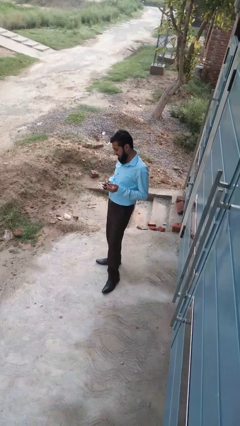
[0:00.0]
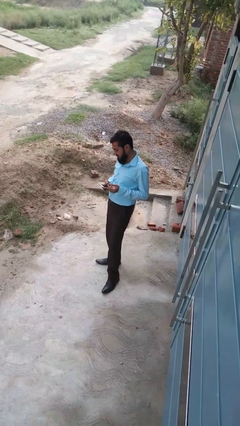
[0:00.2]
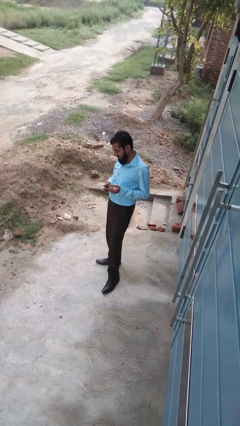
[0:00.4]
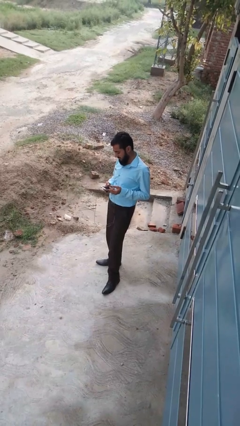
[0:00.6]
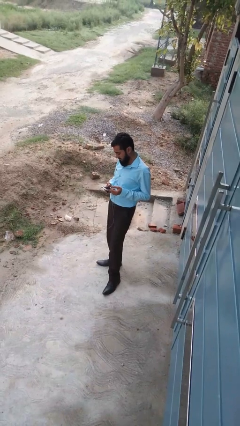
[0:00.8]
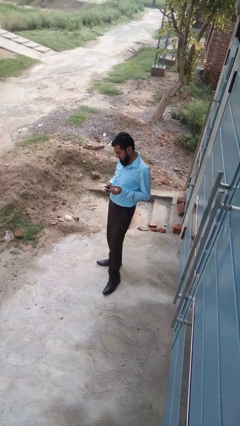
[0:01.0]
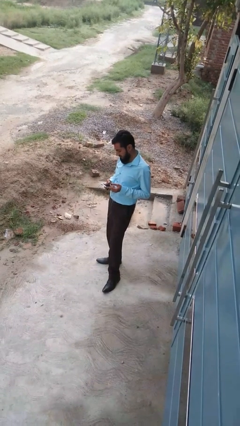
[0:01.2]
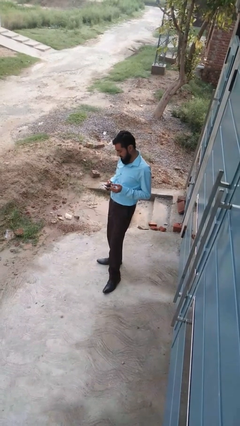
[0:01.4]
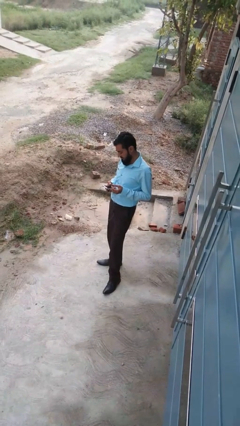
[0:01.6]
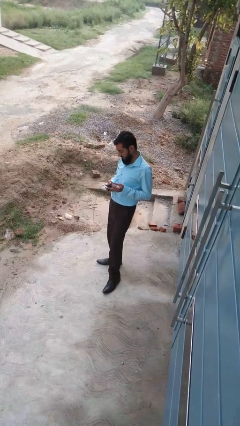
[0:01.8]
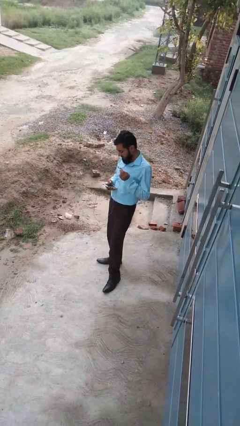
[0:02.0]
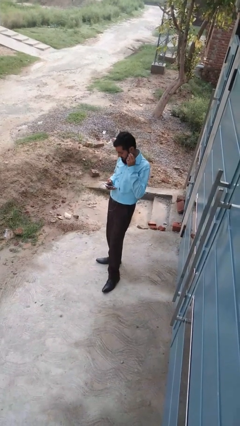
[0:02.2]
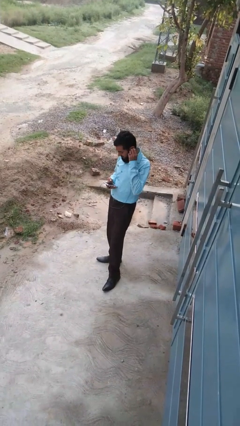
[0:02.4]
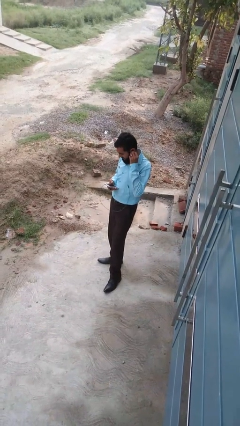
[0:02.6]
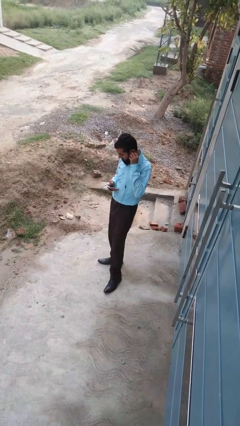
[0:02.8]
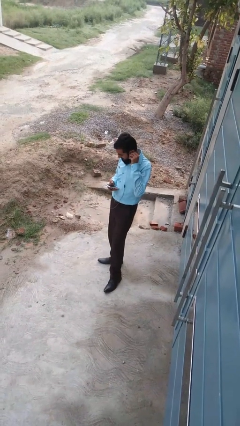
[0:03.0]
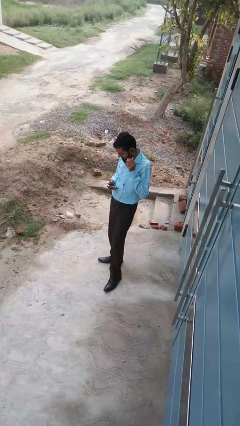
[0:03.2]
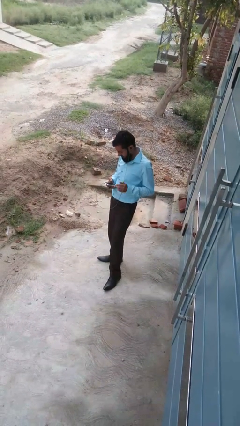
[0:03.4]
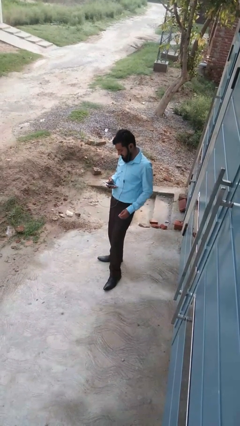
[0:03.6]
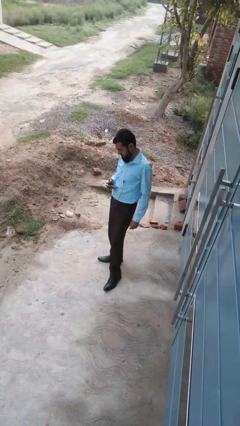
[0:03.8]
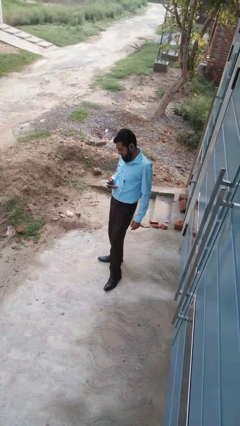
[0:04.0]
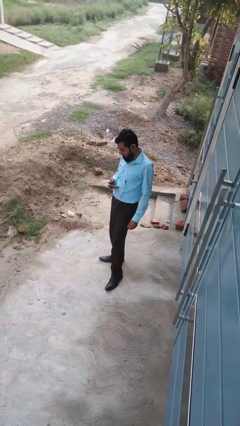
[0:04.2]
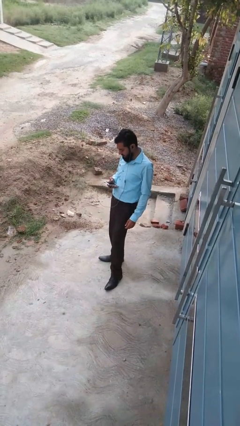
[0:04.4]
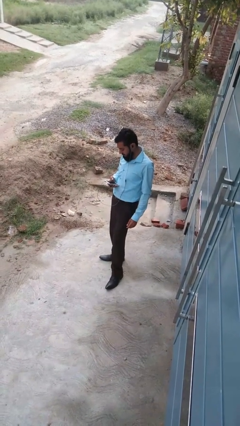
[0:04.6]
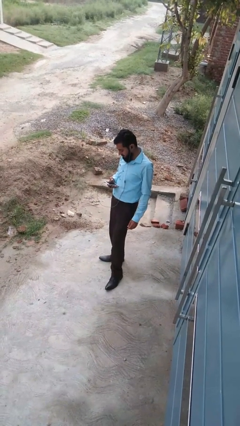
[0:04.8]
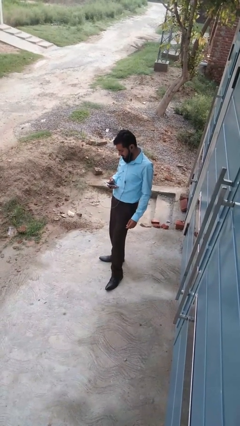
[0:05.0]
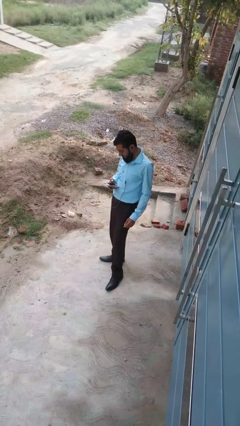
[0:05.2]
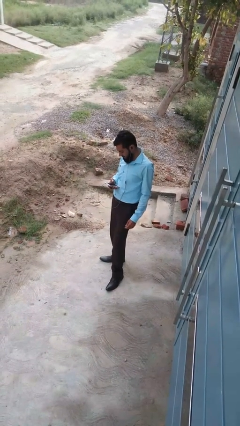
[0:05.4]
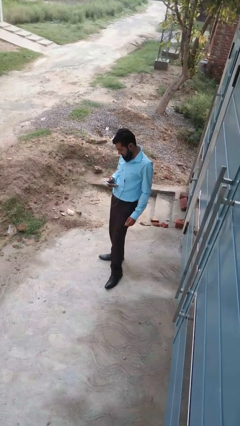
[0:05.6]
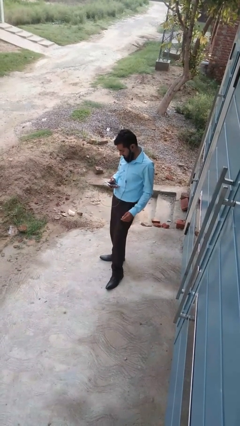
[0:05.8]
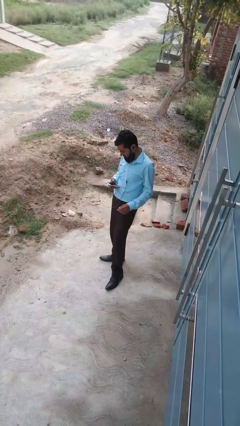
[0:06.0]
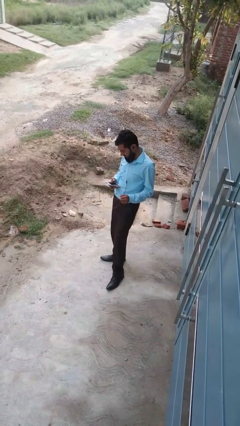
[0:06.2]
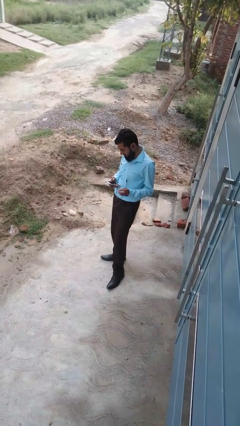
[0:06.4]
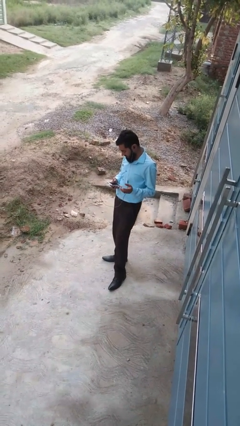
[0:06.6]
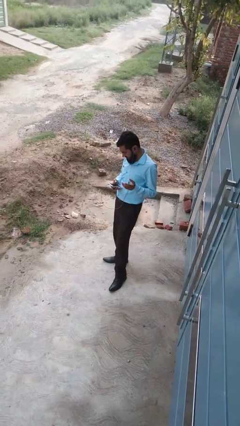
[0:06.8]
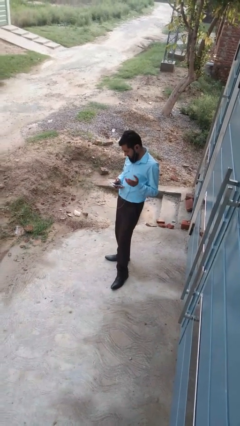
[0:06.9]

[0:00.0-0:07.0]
person puts on headphones

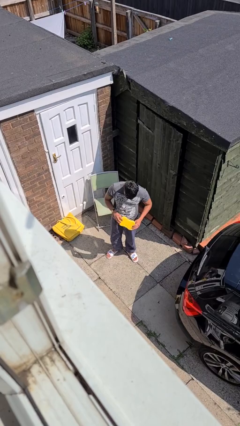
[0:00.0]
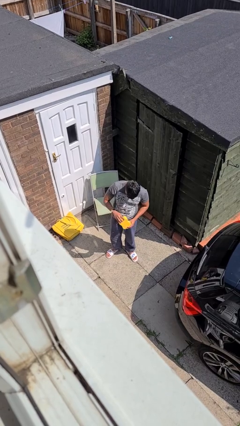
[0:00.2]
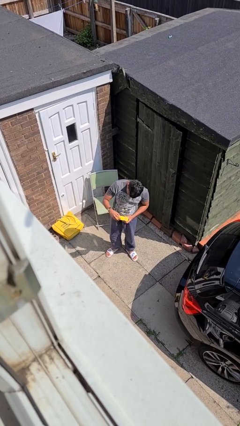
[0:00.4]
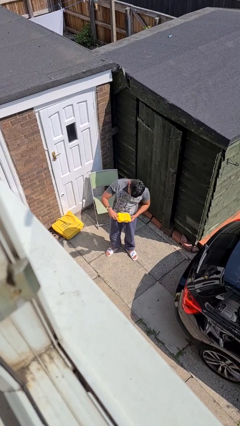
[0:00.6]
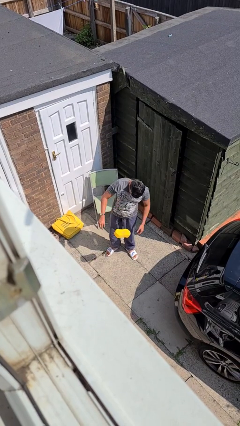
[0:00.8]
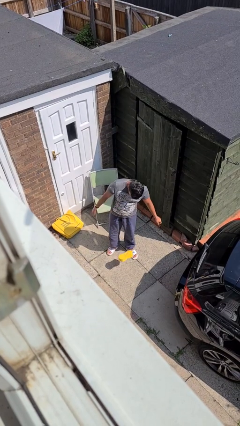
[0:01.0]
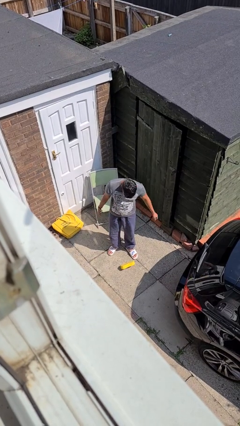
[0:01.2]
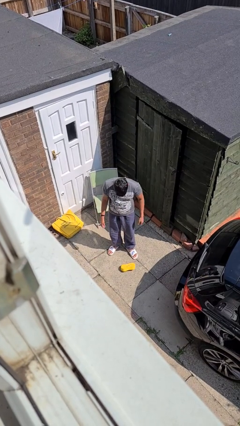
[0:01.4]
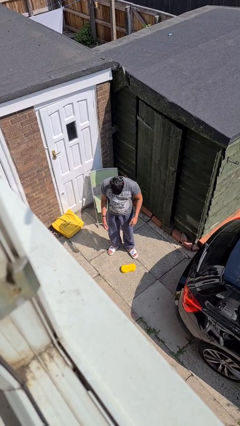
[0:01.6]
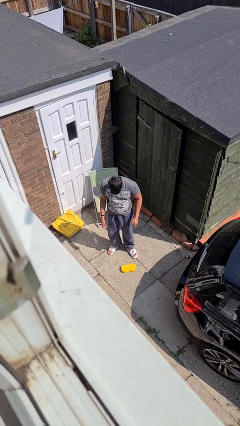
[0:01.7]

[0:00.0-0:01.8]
person drops object

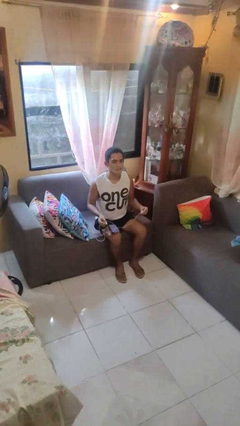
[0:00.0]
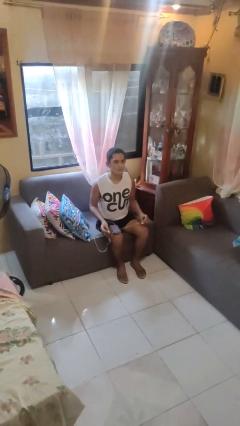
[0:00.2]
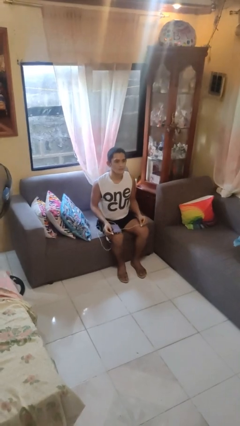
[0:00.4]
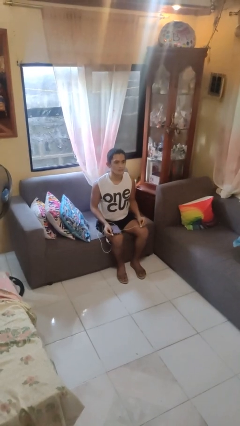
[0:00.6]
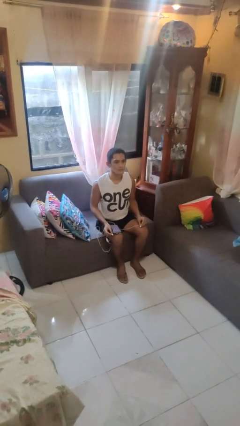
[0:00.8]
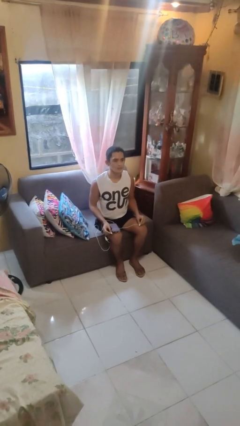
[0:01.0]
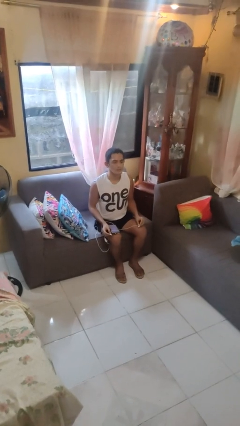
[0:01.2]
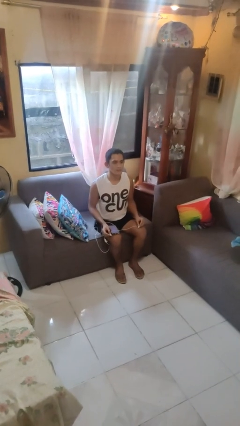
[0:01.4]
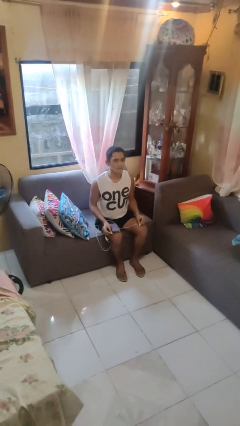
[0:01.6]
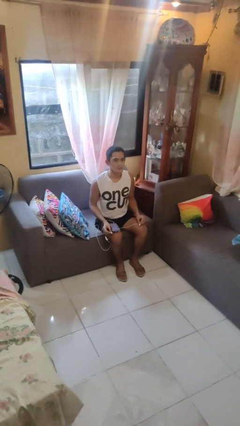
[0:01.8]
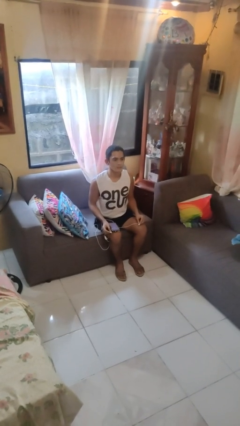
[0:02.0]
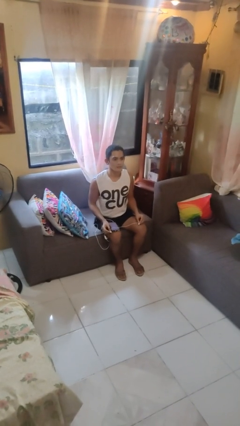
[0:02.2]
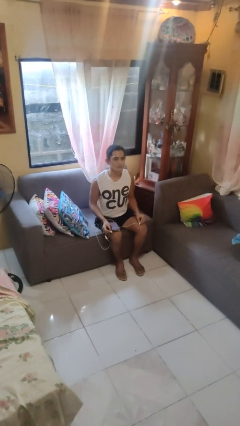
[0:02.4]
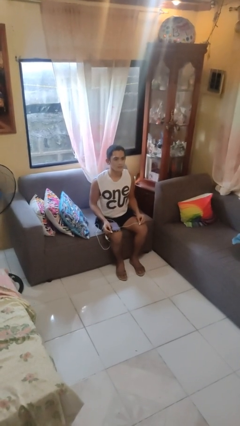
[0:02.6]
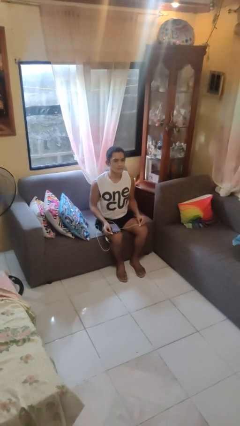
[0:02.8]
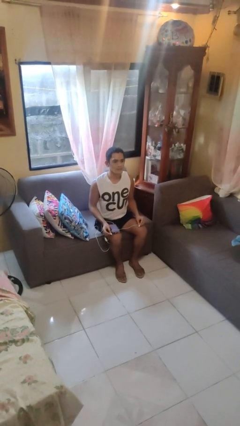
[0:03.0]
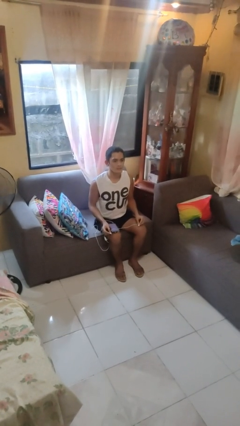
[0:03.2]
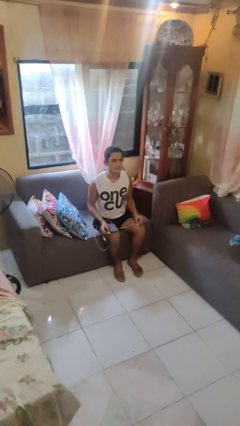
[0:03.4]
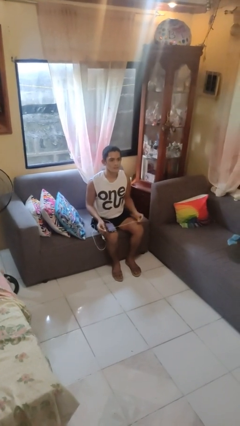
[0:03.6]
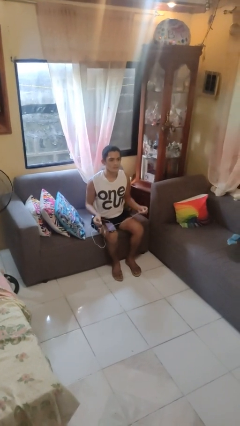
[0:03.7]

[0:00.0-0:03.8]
person takes off headphones

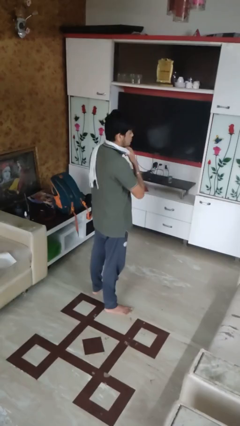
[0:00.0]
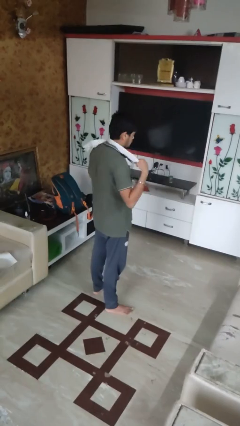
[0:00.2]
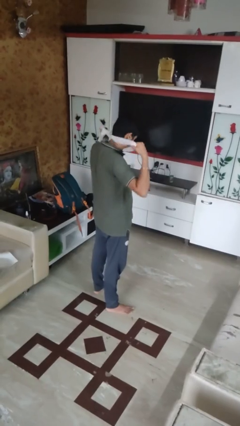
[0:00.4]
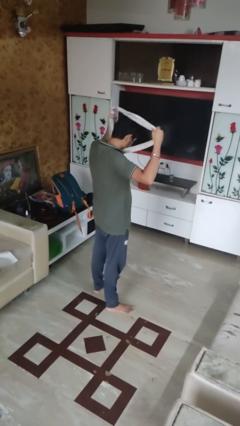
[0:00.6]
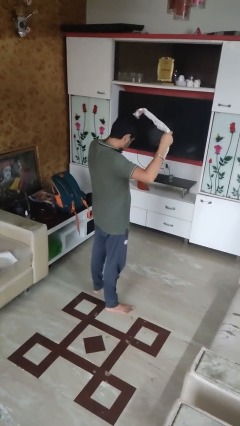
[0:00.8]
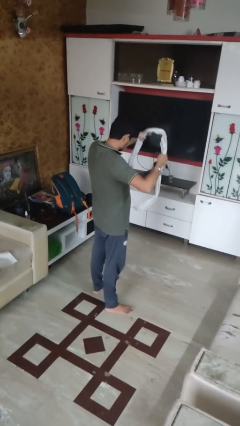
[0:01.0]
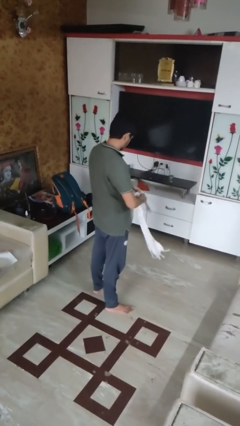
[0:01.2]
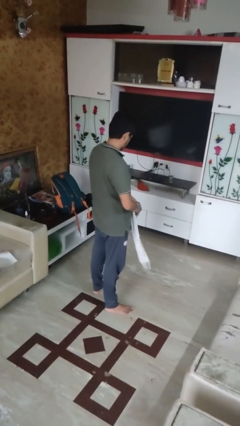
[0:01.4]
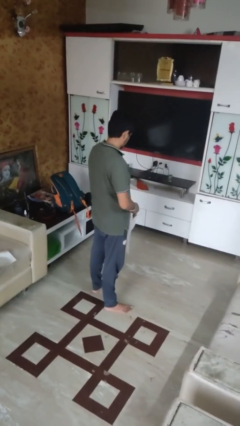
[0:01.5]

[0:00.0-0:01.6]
person takes off scarf

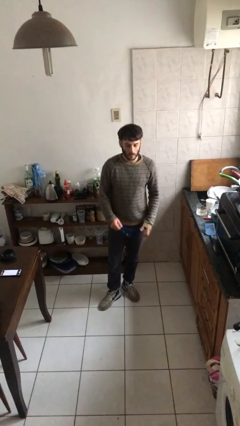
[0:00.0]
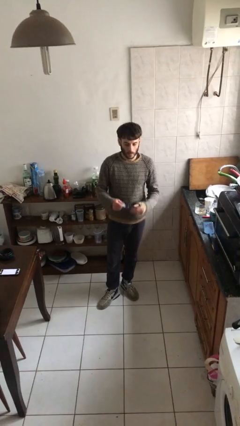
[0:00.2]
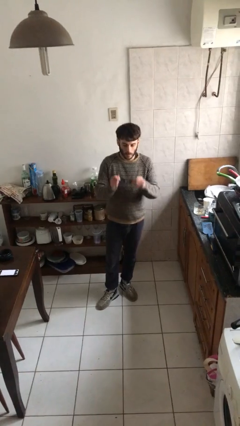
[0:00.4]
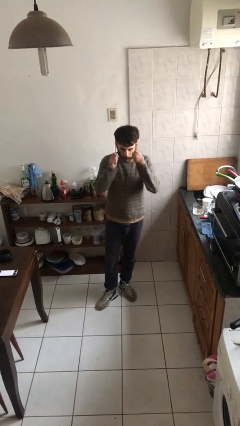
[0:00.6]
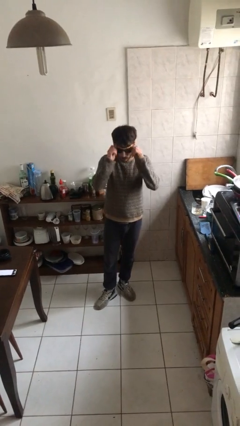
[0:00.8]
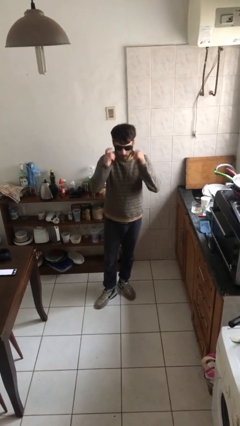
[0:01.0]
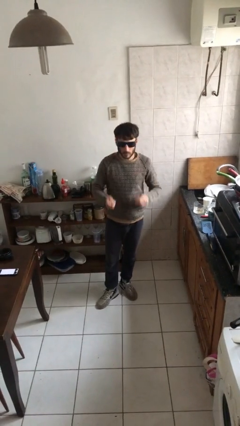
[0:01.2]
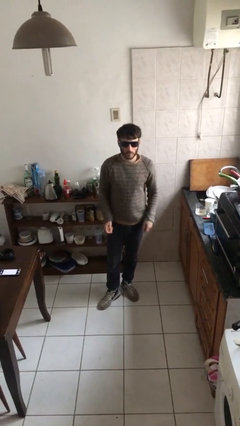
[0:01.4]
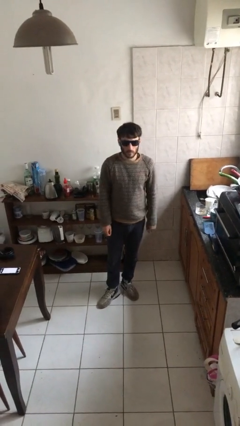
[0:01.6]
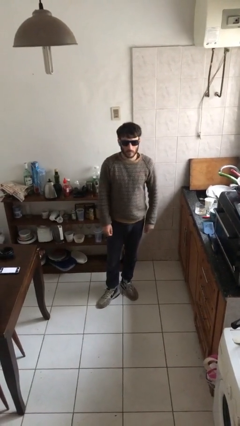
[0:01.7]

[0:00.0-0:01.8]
person puts on sunglasses

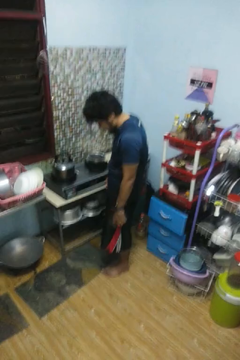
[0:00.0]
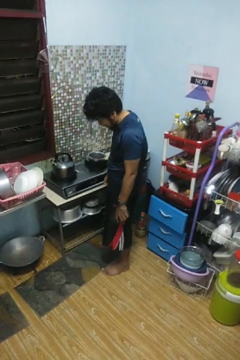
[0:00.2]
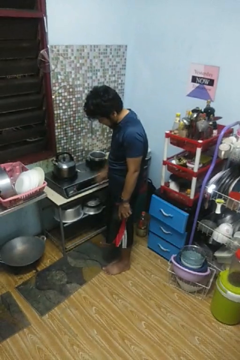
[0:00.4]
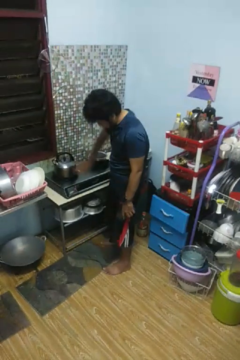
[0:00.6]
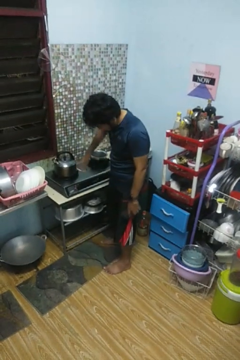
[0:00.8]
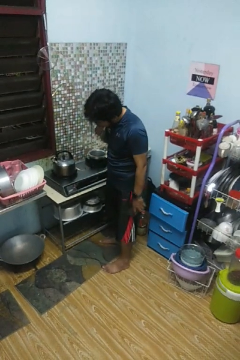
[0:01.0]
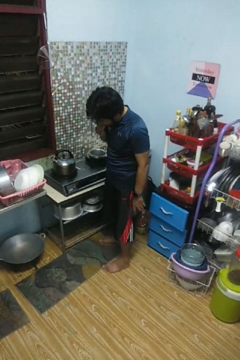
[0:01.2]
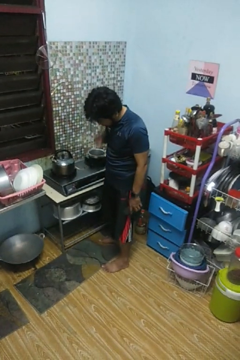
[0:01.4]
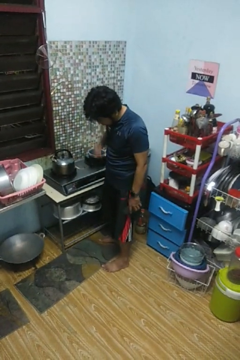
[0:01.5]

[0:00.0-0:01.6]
person burns hand
